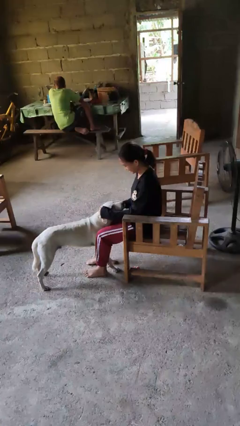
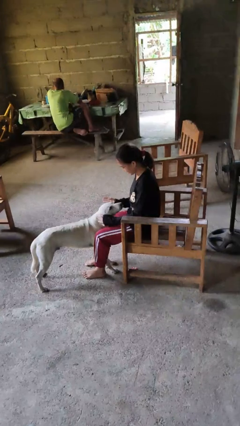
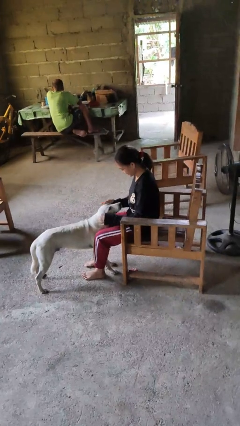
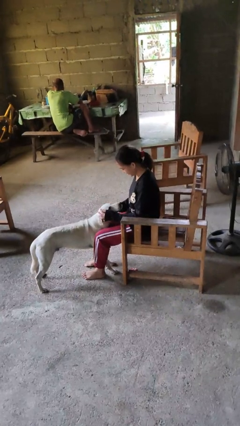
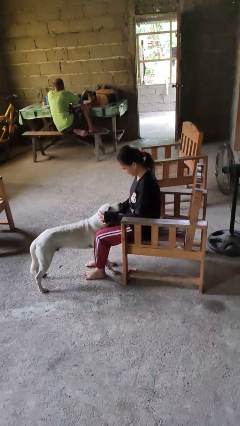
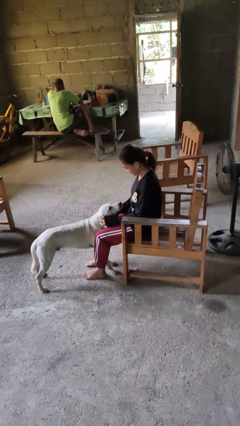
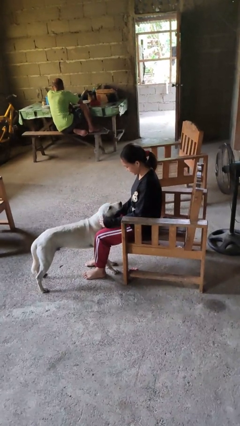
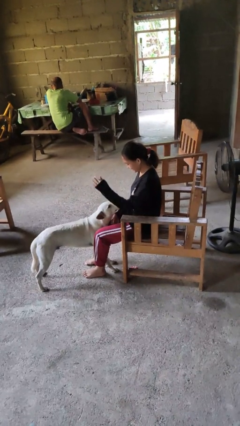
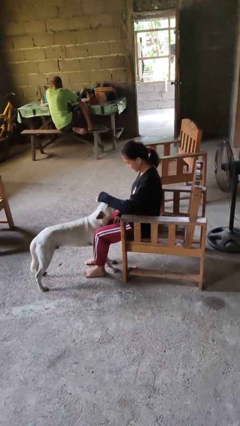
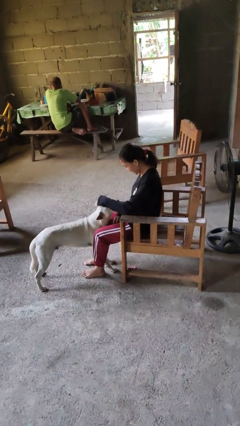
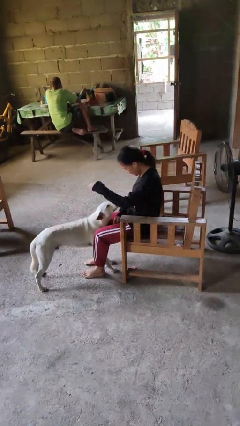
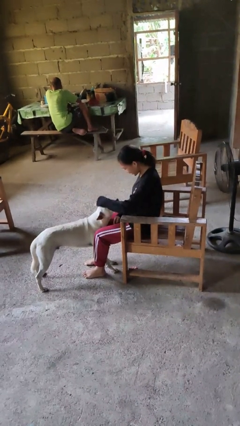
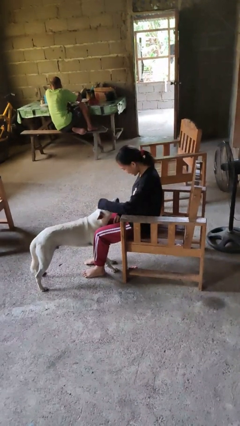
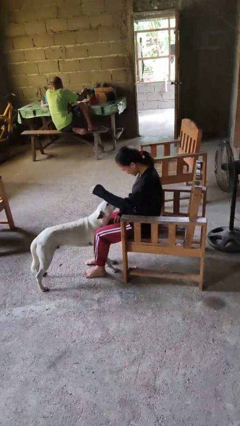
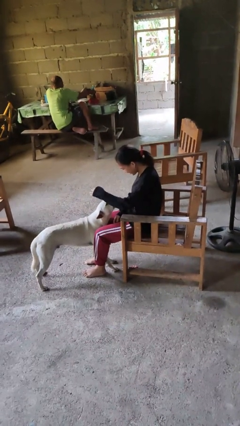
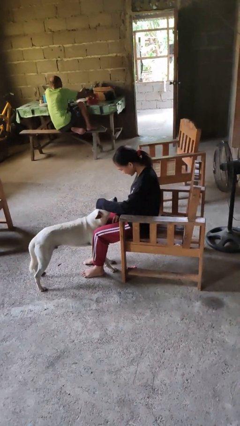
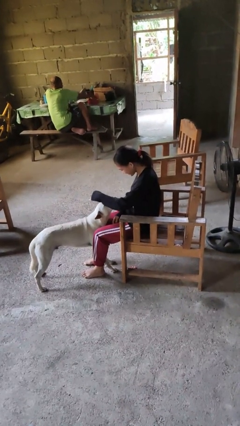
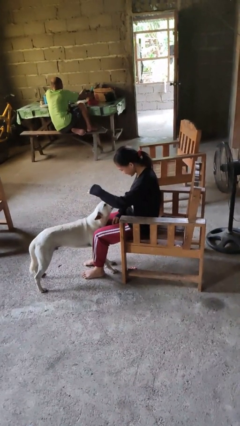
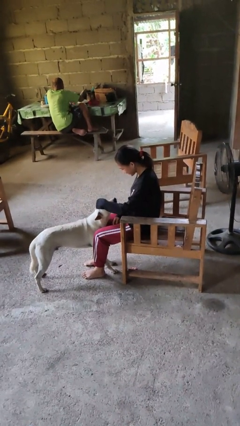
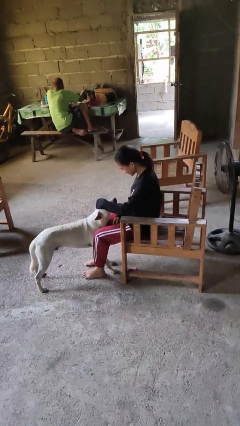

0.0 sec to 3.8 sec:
person pets dog

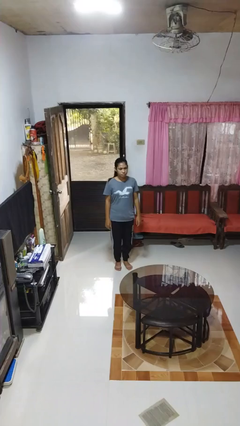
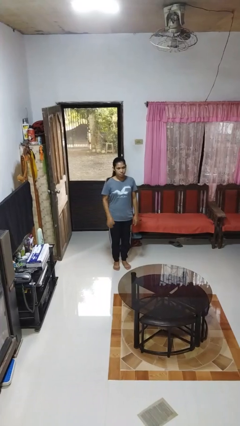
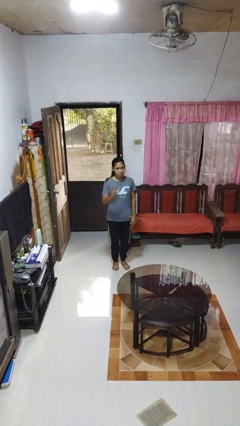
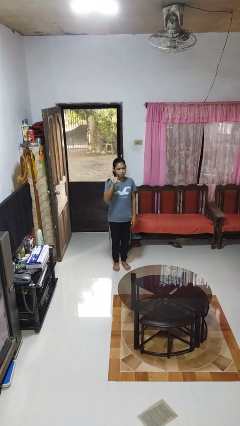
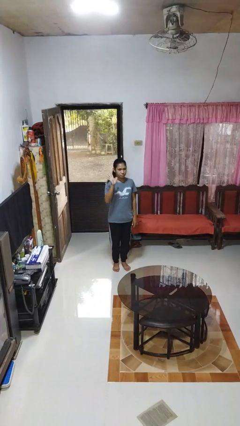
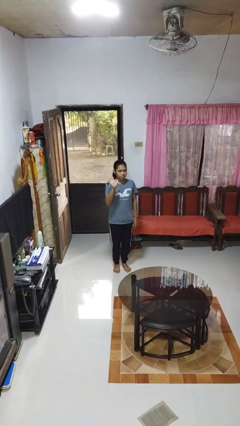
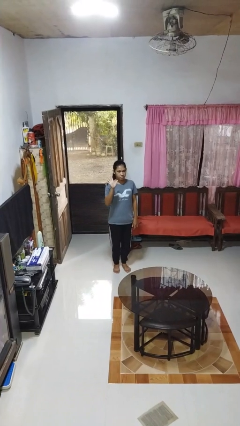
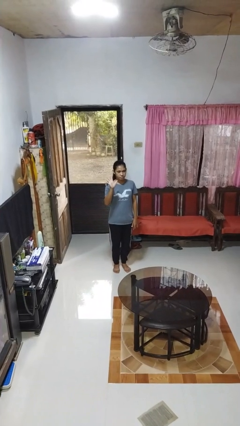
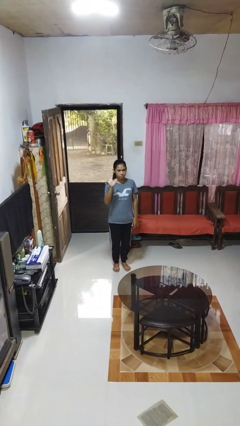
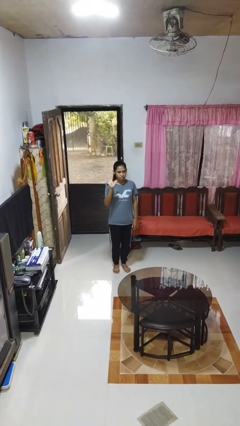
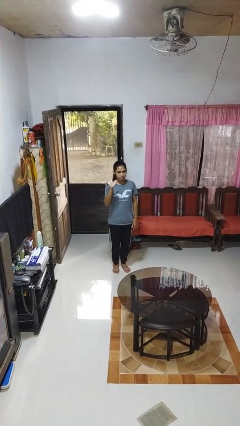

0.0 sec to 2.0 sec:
person gestures number five

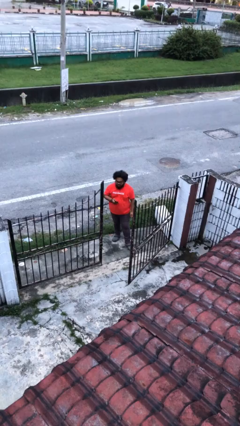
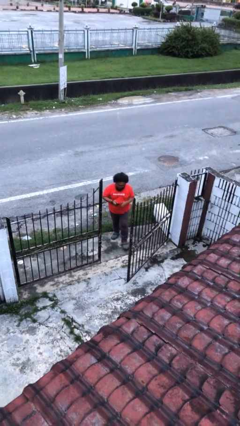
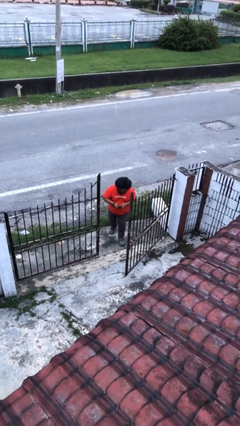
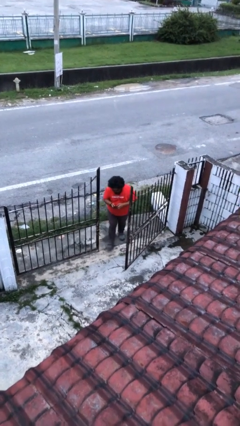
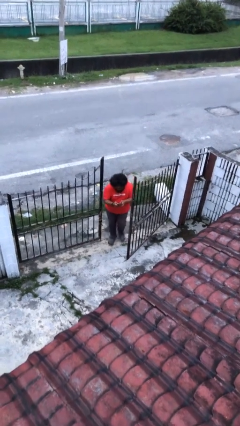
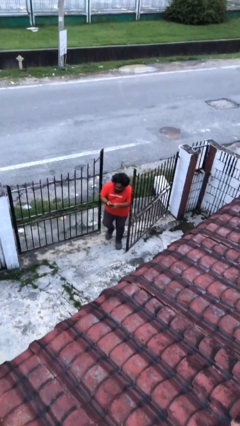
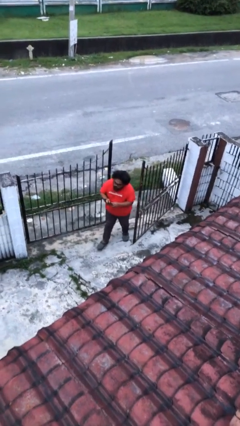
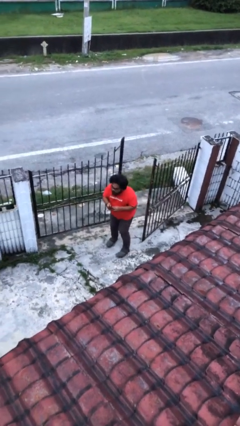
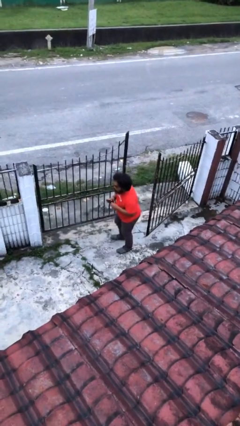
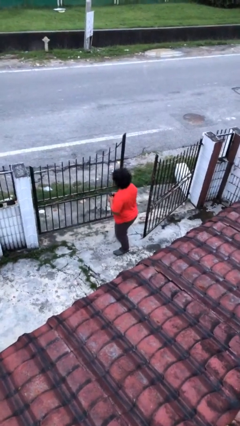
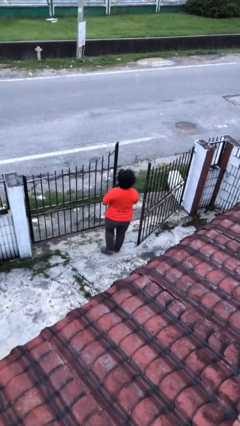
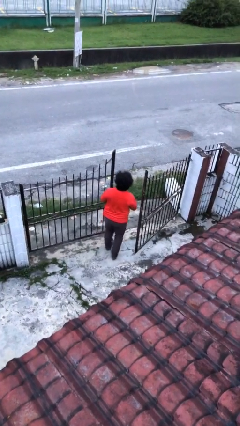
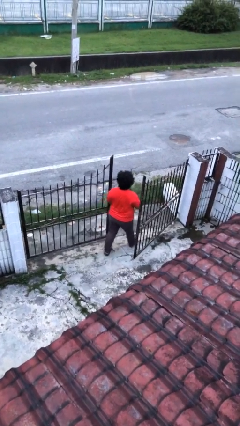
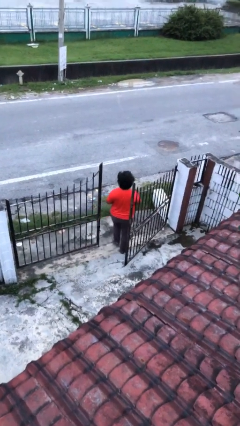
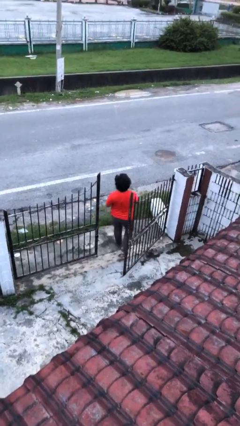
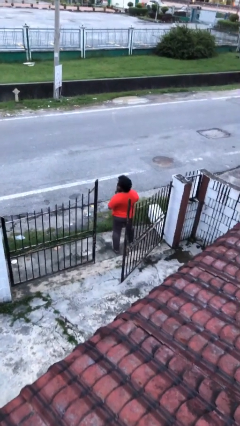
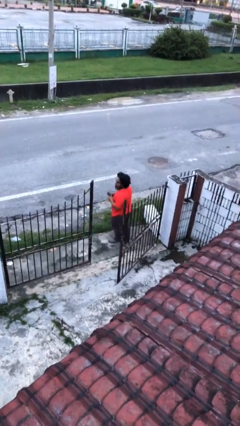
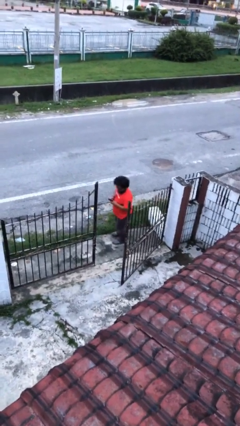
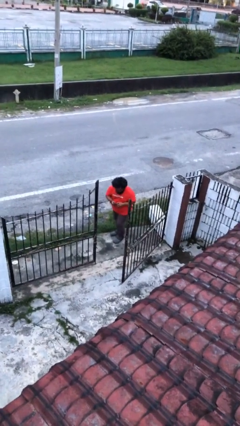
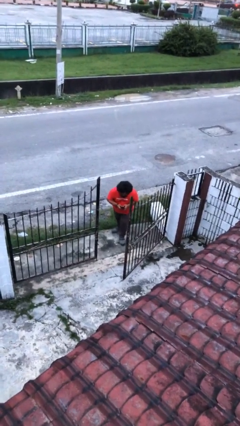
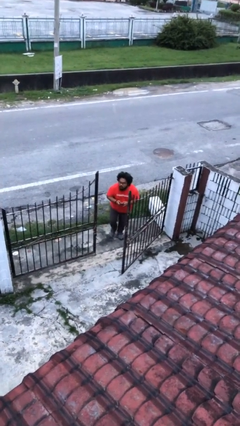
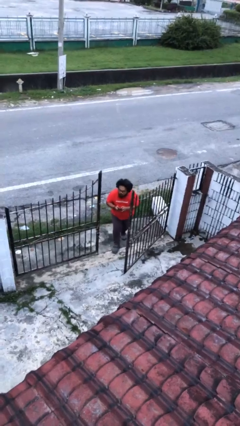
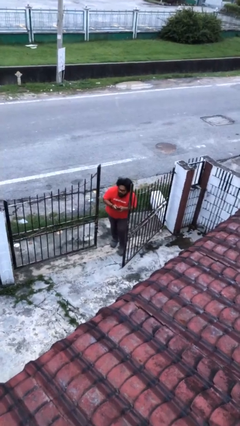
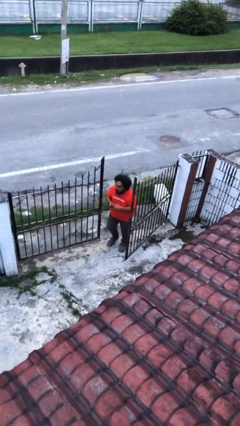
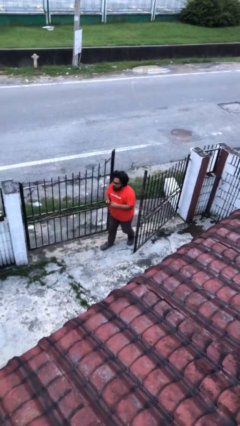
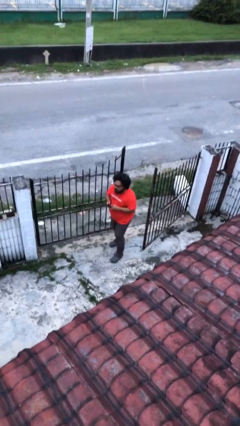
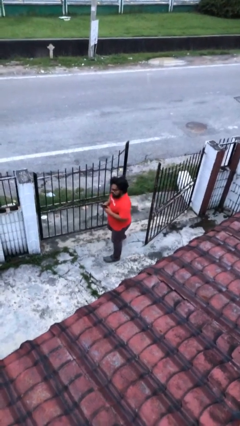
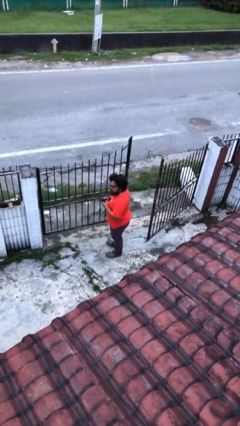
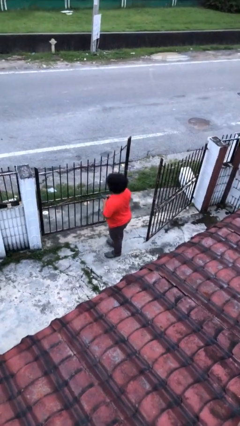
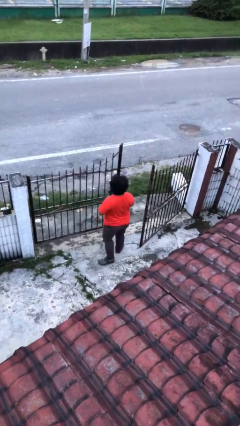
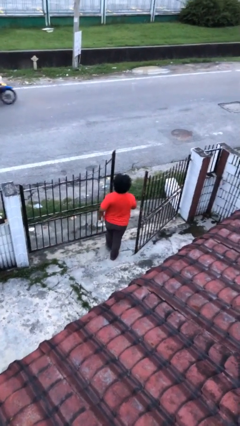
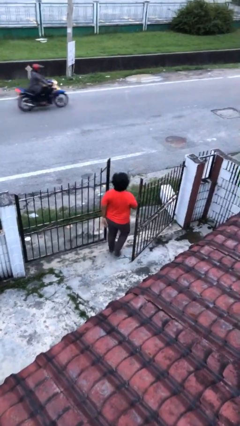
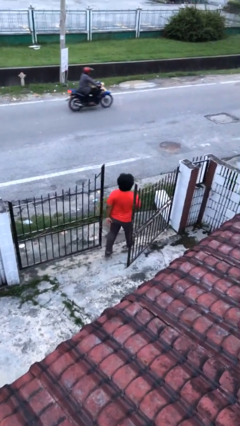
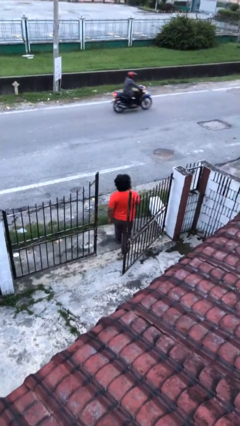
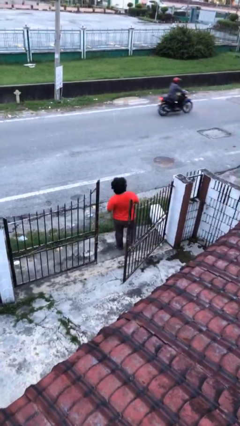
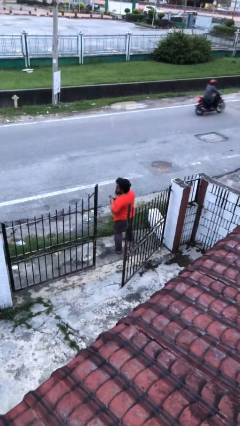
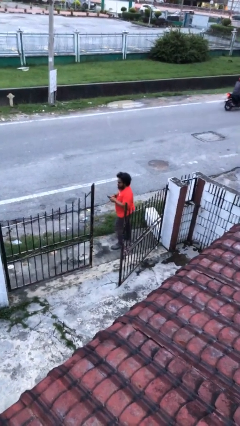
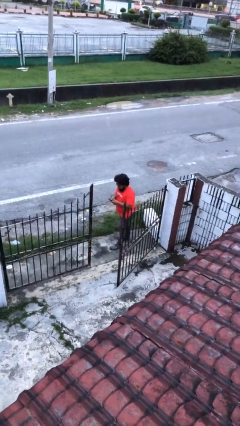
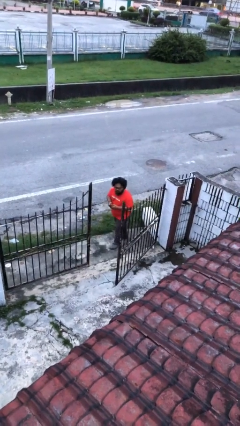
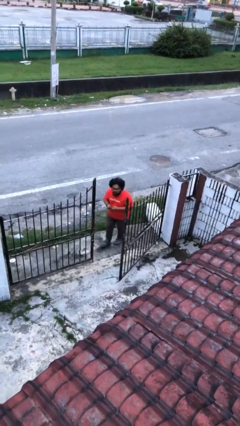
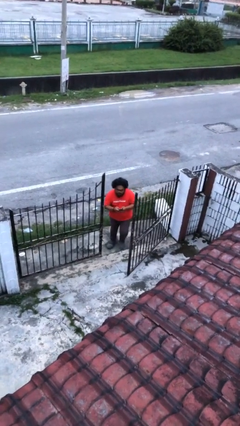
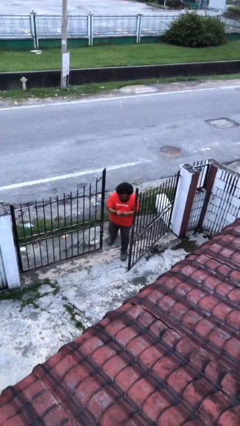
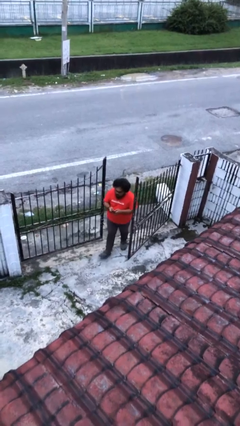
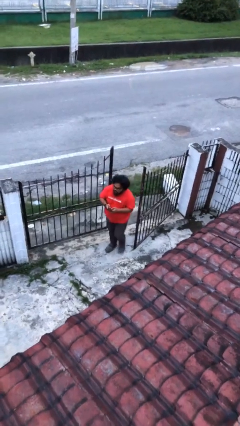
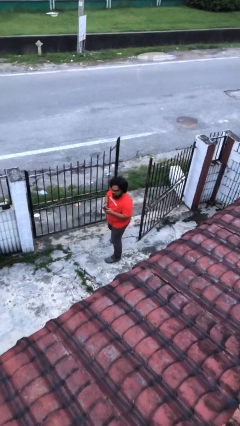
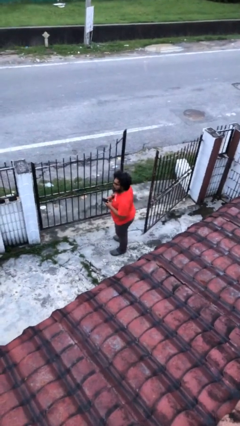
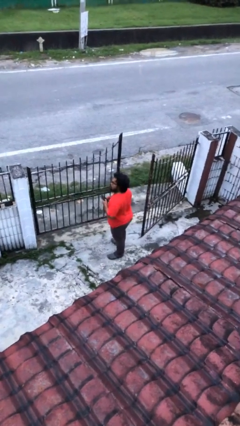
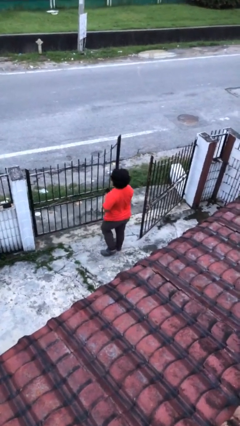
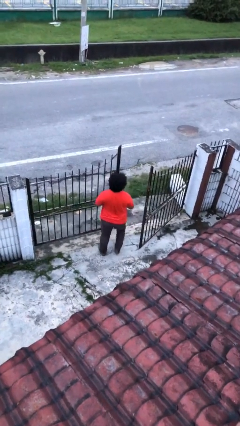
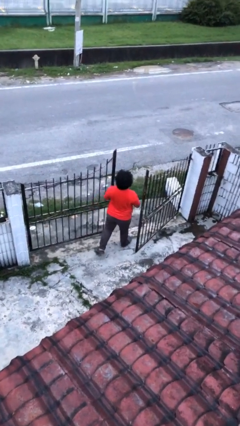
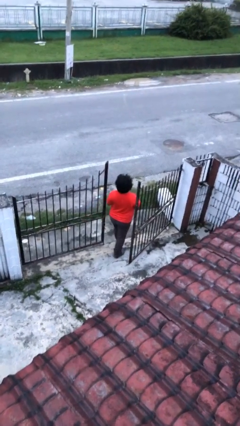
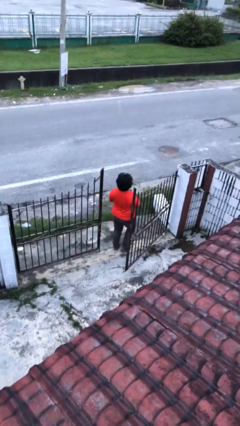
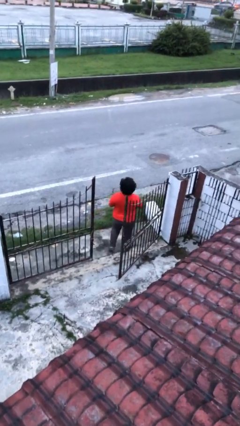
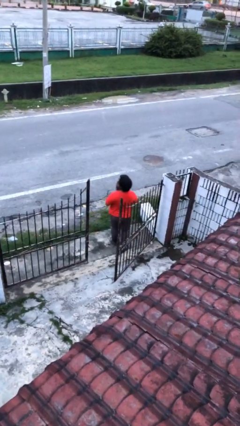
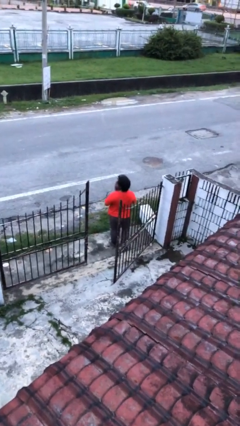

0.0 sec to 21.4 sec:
person texts on phone

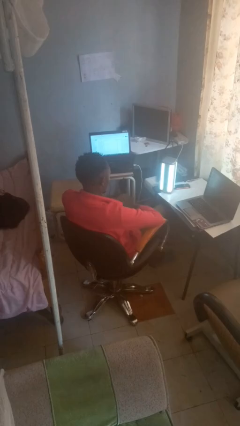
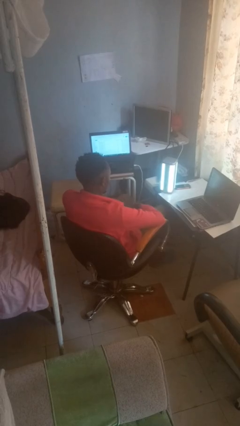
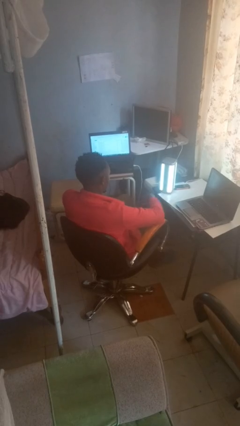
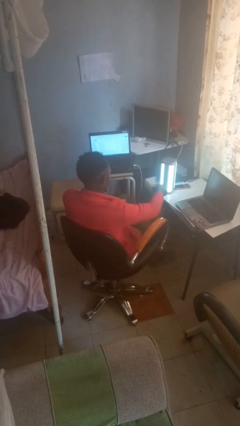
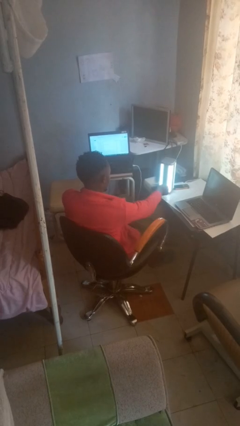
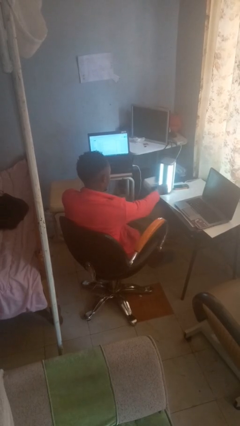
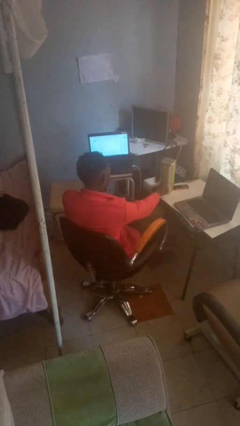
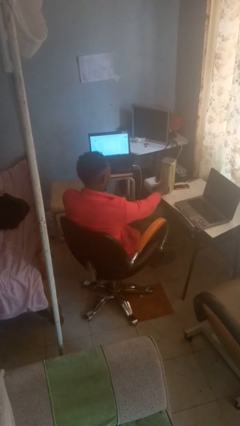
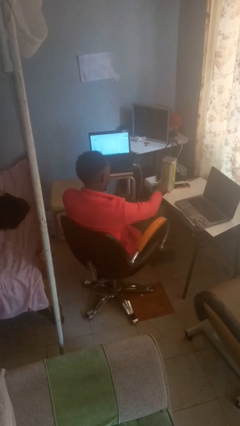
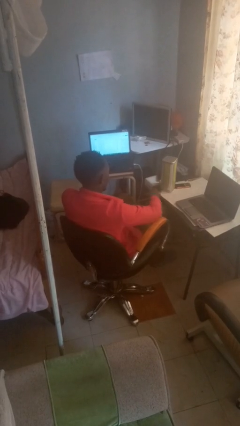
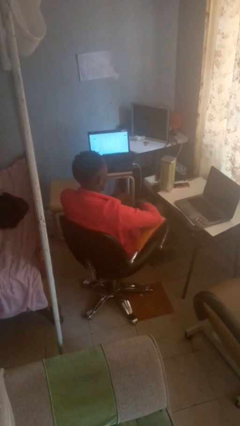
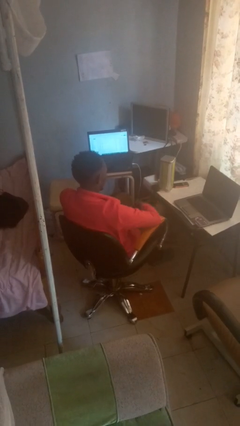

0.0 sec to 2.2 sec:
person turns off lamp
